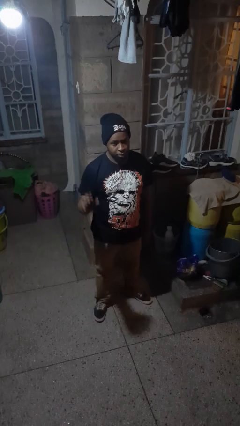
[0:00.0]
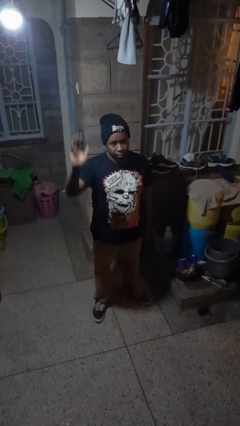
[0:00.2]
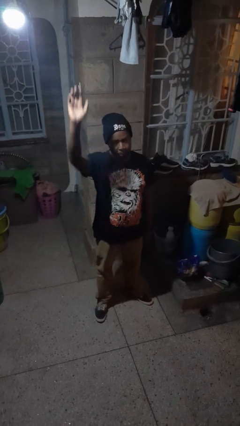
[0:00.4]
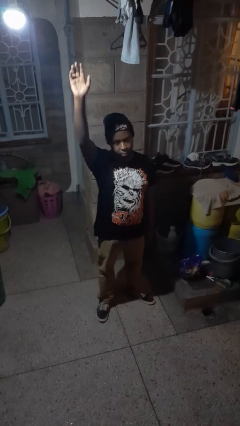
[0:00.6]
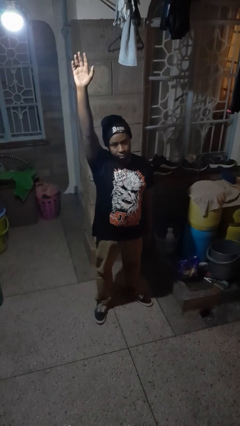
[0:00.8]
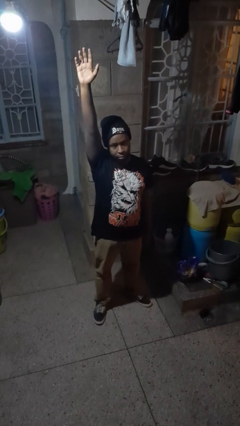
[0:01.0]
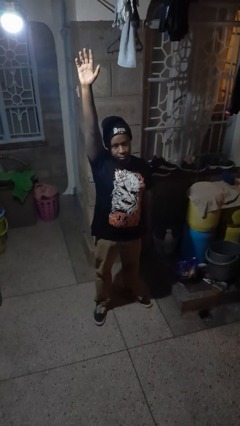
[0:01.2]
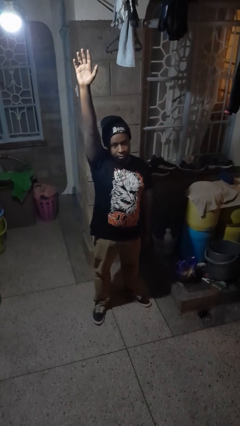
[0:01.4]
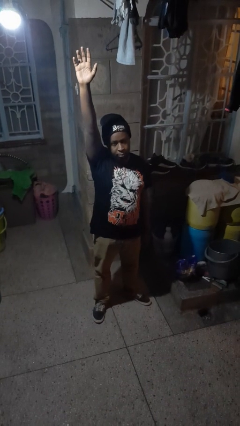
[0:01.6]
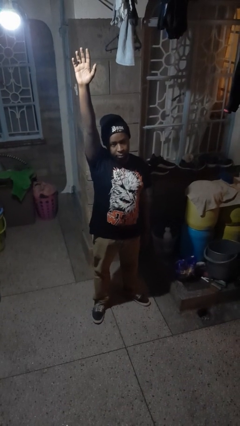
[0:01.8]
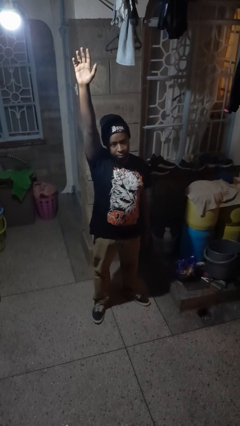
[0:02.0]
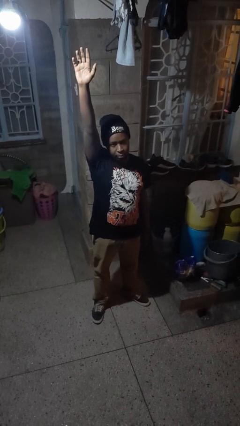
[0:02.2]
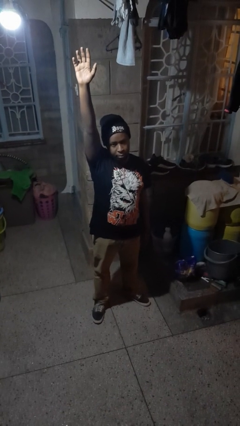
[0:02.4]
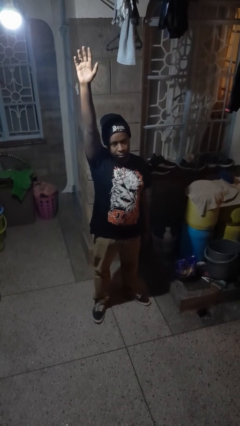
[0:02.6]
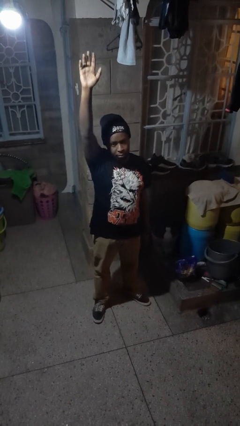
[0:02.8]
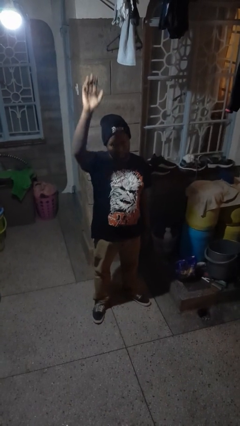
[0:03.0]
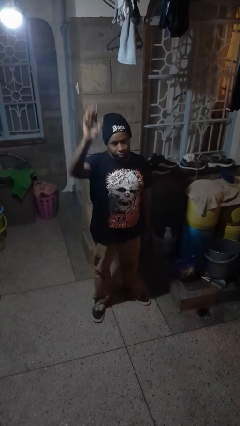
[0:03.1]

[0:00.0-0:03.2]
person gestures raise hand

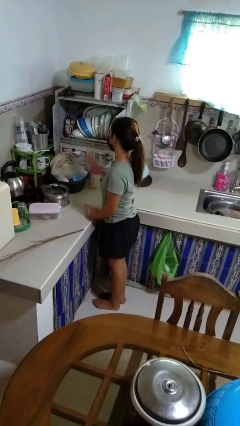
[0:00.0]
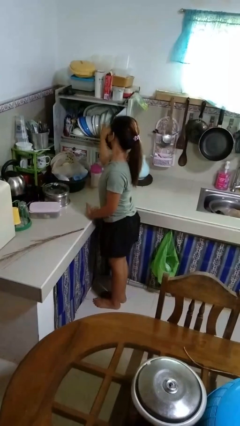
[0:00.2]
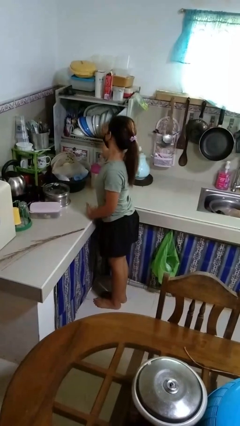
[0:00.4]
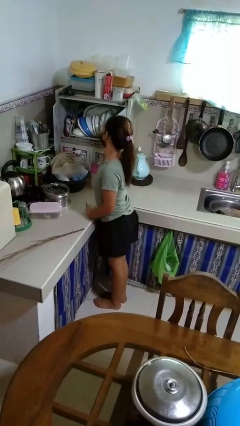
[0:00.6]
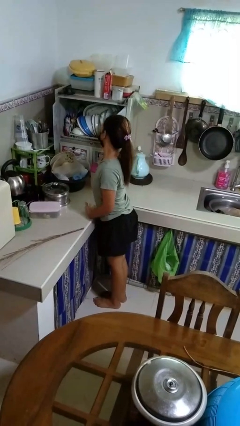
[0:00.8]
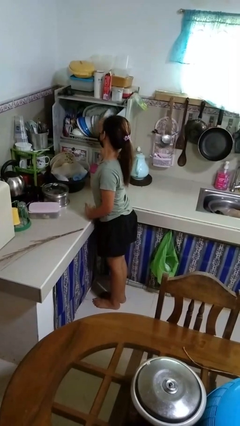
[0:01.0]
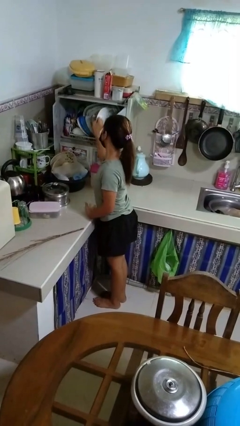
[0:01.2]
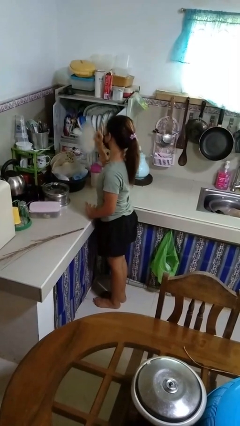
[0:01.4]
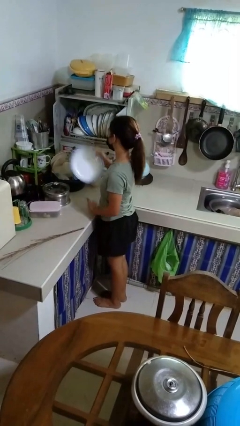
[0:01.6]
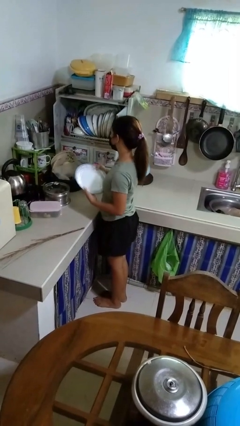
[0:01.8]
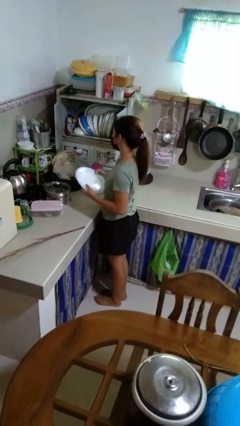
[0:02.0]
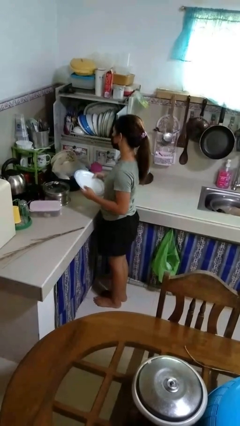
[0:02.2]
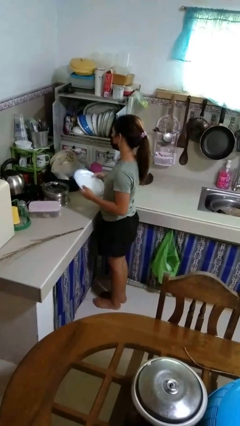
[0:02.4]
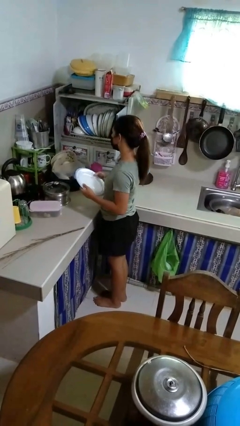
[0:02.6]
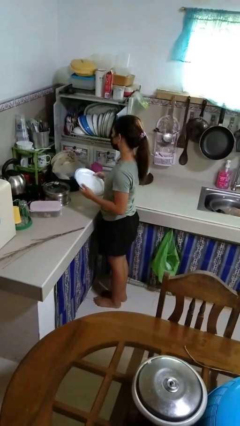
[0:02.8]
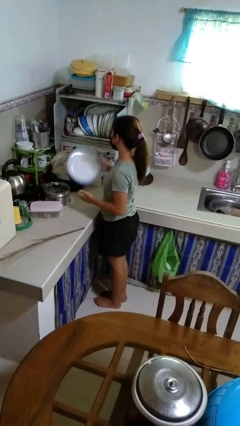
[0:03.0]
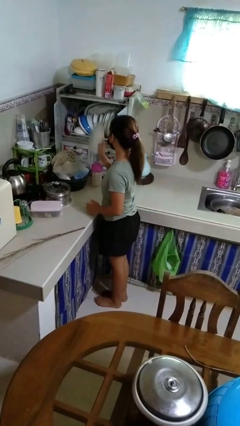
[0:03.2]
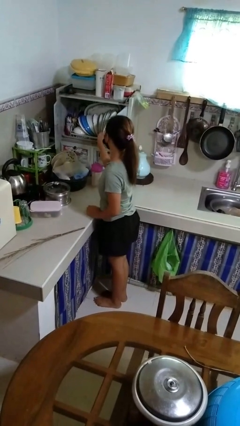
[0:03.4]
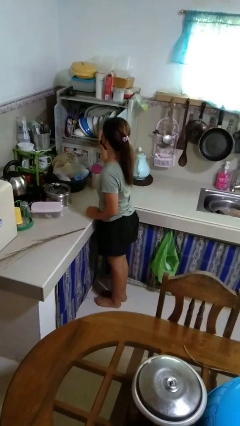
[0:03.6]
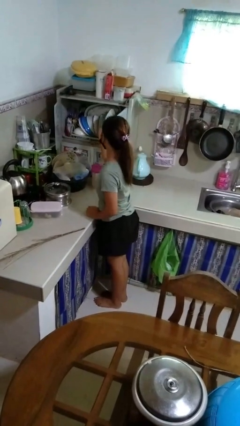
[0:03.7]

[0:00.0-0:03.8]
person takes object from kitchen drawer

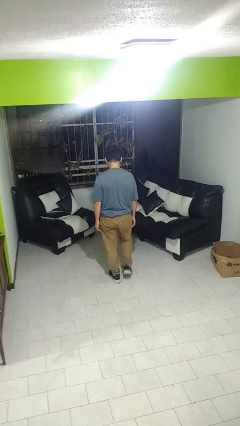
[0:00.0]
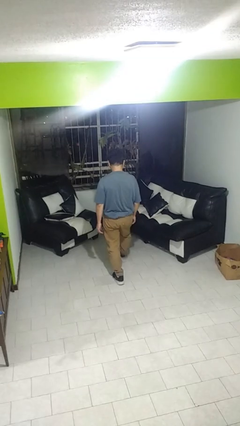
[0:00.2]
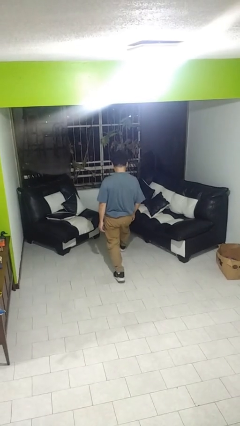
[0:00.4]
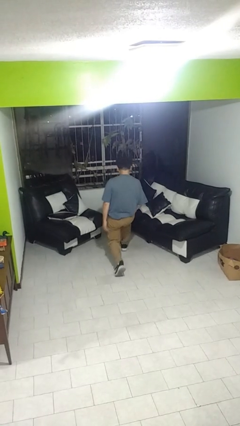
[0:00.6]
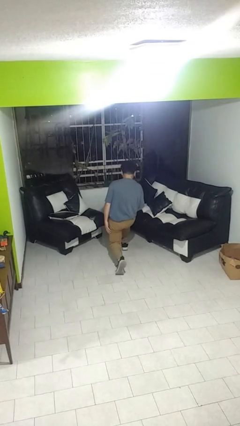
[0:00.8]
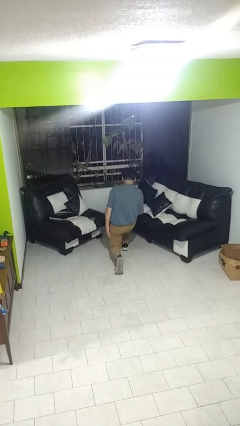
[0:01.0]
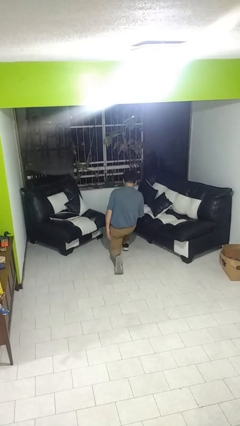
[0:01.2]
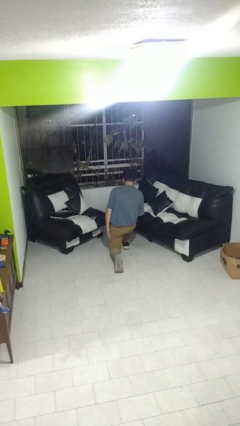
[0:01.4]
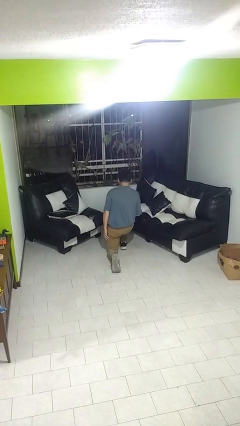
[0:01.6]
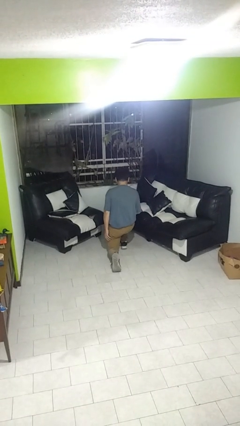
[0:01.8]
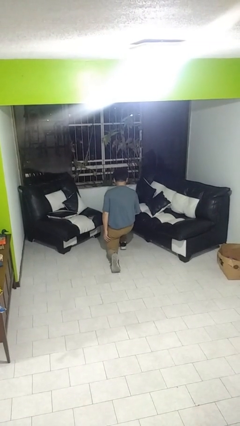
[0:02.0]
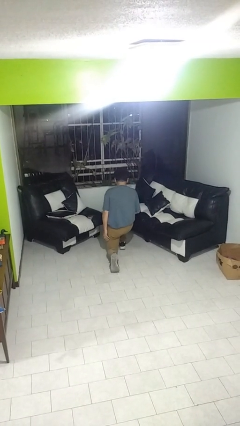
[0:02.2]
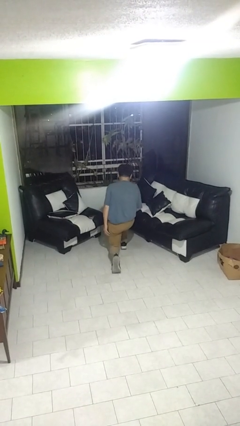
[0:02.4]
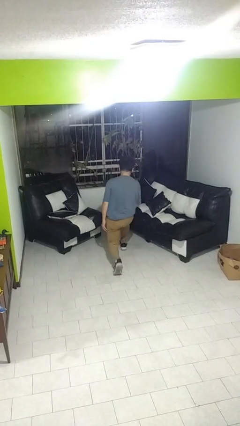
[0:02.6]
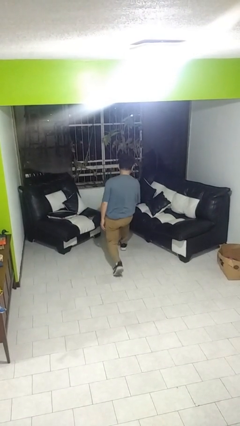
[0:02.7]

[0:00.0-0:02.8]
person exercises with lunges

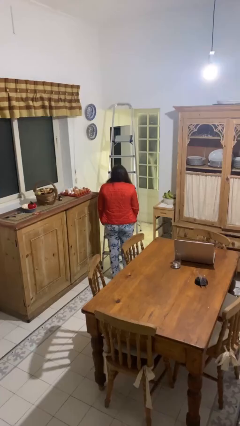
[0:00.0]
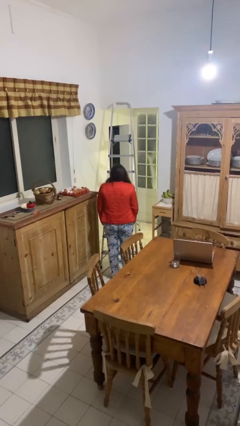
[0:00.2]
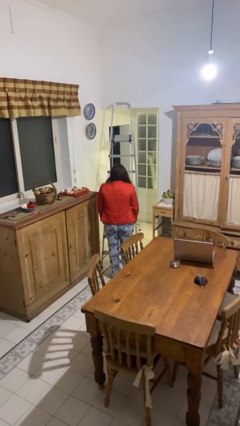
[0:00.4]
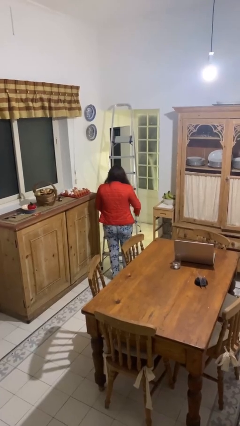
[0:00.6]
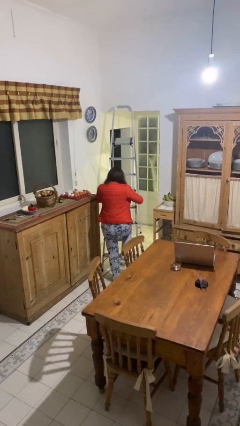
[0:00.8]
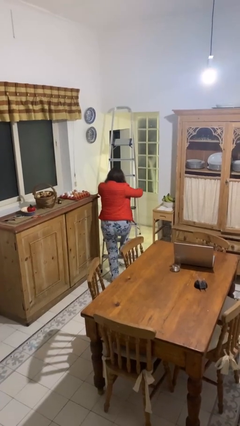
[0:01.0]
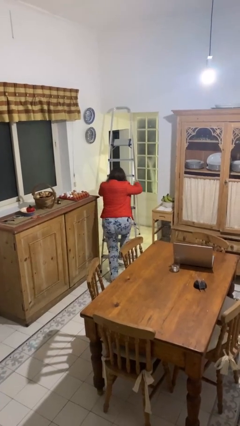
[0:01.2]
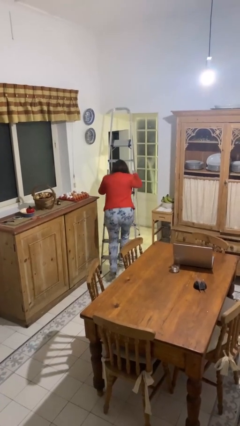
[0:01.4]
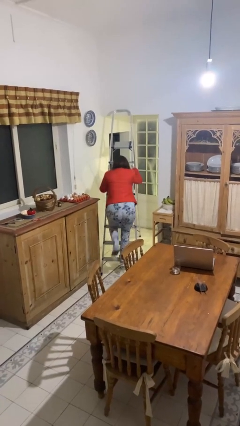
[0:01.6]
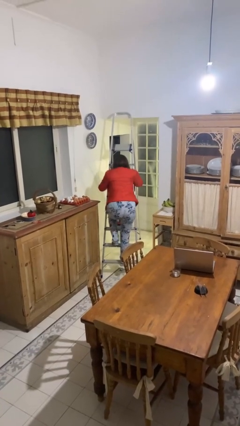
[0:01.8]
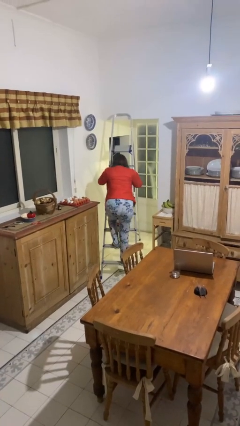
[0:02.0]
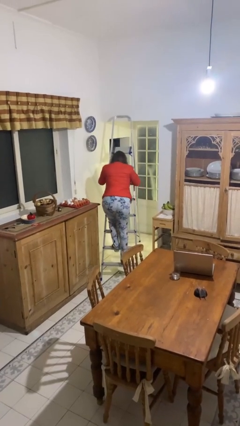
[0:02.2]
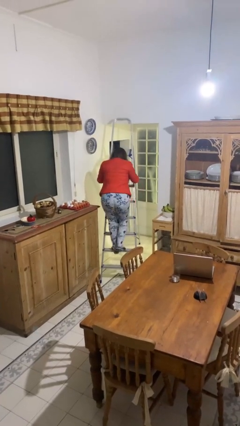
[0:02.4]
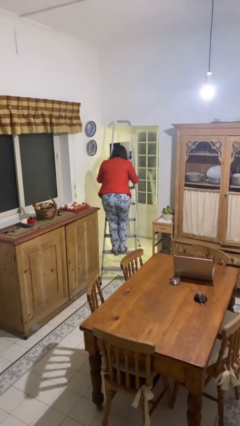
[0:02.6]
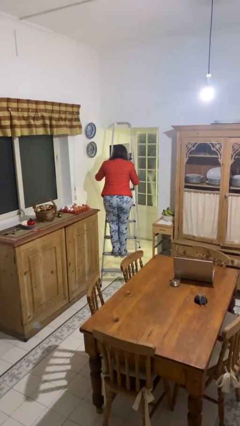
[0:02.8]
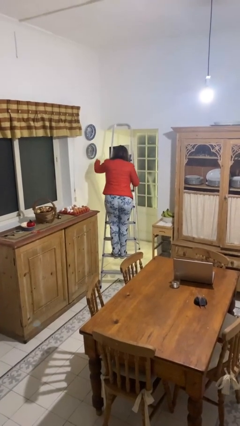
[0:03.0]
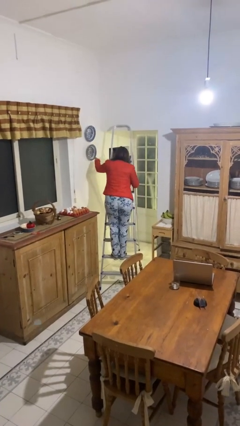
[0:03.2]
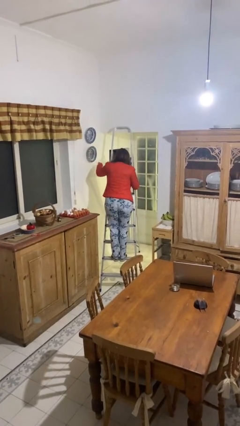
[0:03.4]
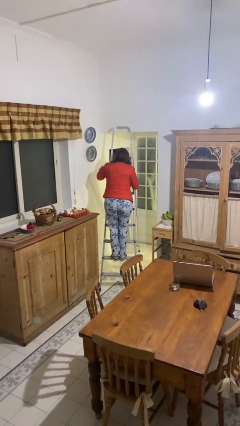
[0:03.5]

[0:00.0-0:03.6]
person climbs up ladder

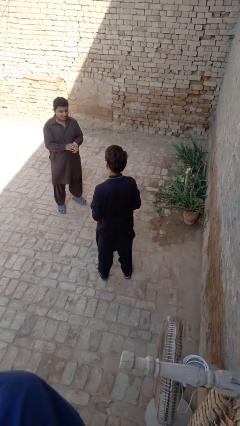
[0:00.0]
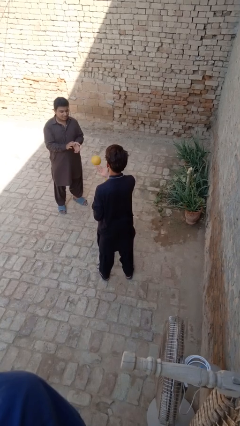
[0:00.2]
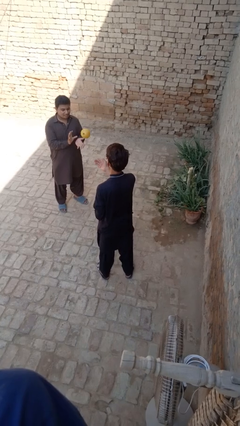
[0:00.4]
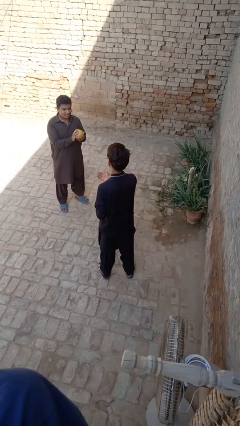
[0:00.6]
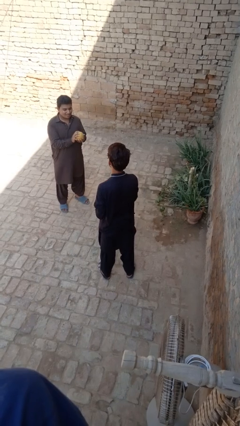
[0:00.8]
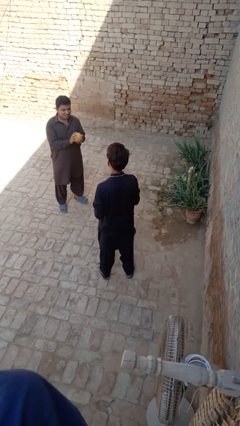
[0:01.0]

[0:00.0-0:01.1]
person throws object to person

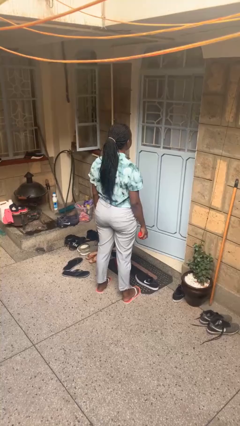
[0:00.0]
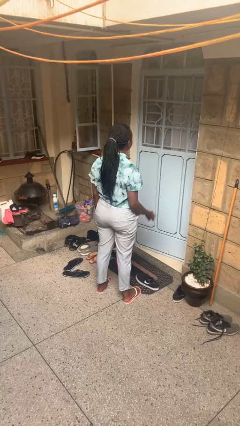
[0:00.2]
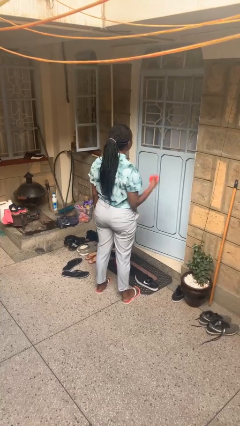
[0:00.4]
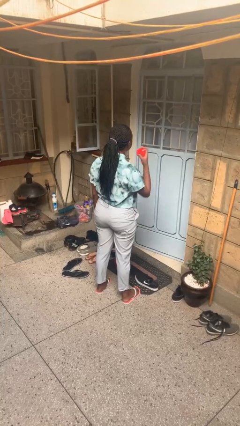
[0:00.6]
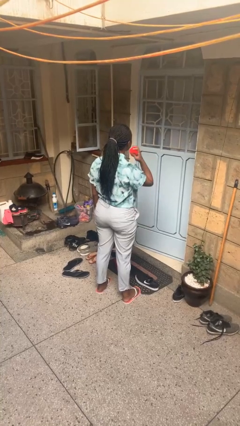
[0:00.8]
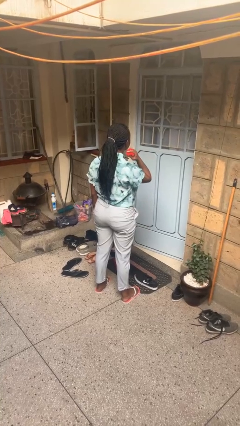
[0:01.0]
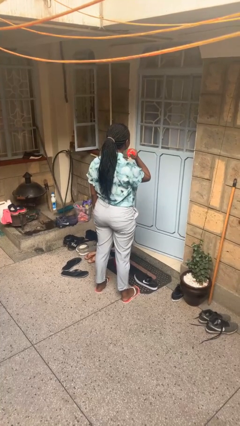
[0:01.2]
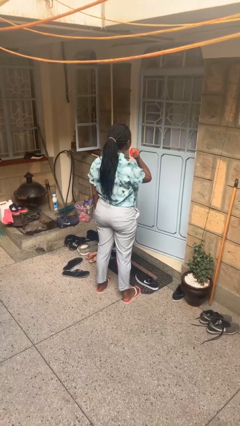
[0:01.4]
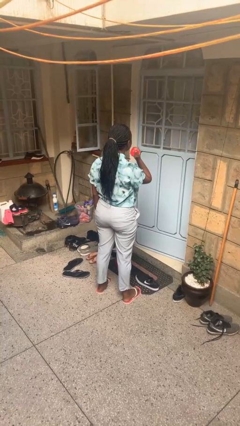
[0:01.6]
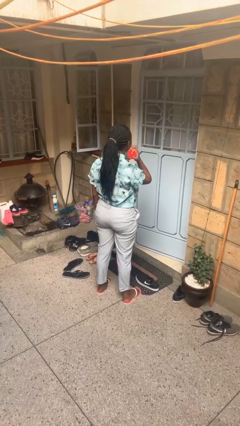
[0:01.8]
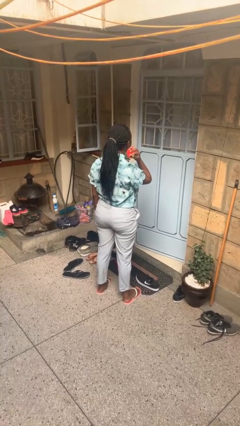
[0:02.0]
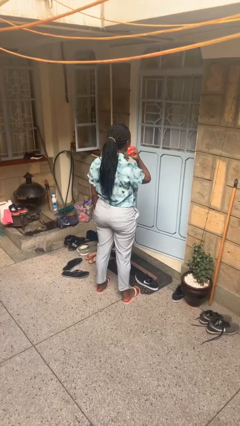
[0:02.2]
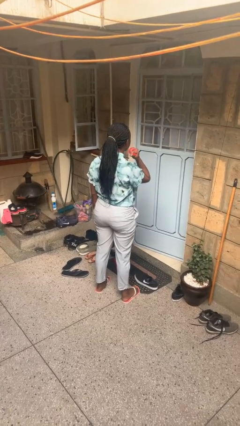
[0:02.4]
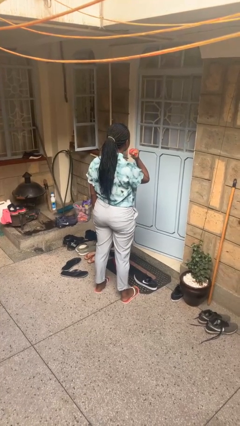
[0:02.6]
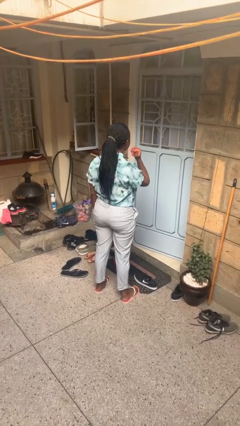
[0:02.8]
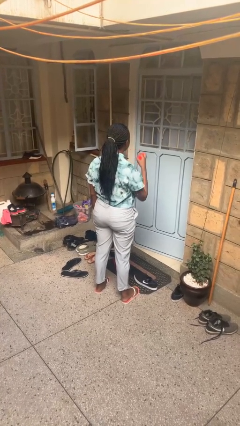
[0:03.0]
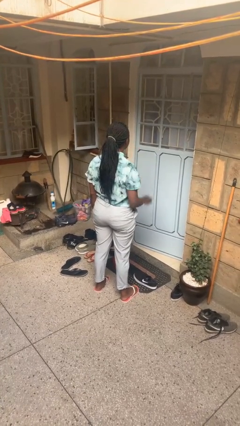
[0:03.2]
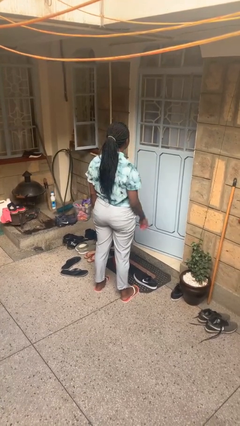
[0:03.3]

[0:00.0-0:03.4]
person squeezes object
